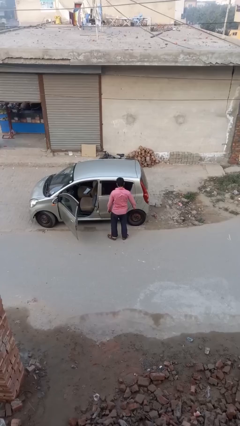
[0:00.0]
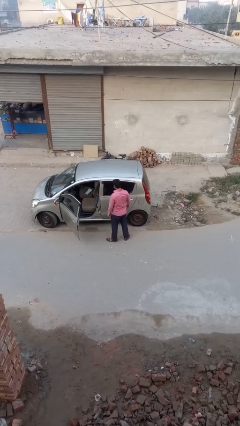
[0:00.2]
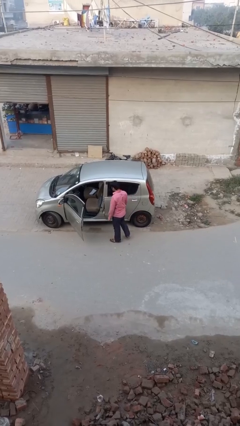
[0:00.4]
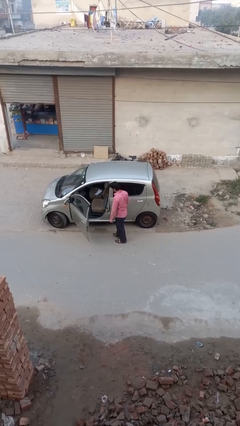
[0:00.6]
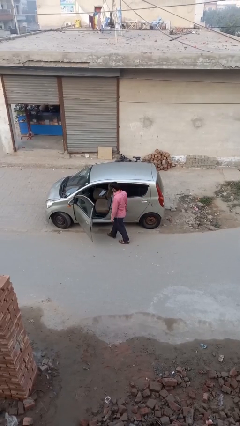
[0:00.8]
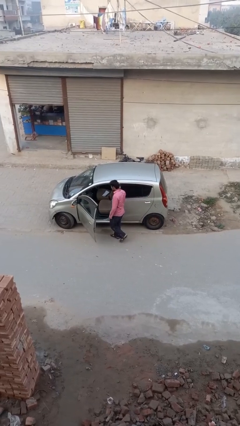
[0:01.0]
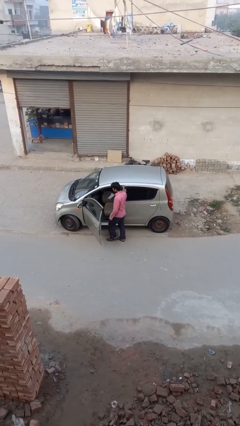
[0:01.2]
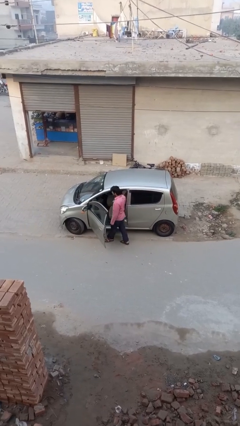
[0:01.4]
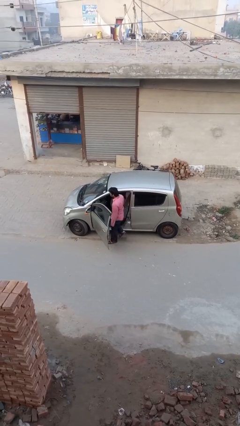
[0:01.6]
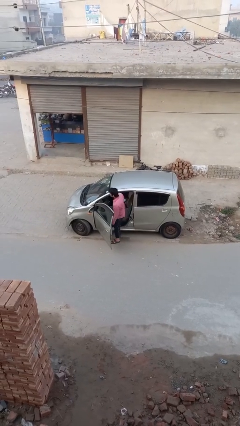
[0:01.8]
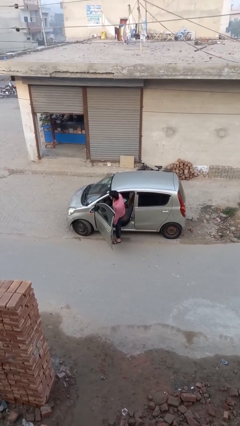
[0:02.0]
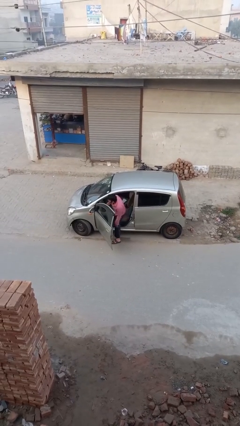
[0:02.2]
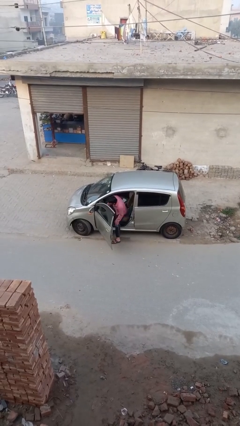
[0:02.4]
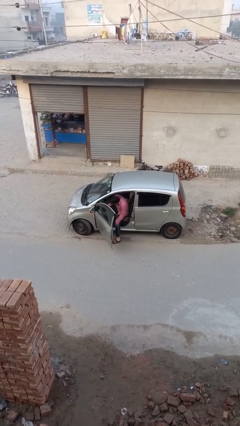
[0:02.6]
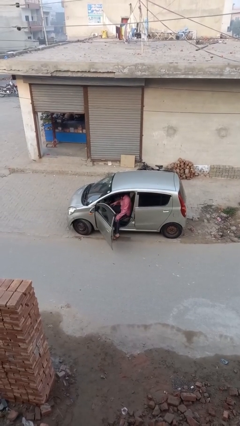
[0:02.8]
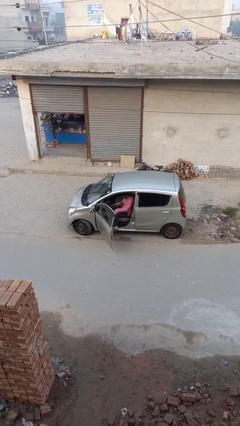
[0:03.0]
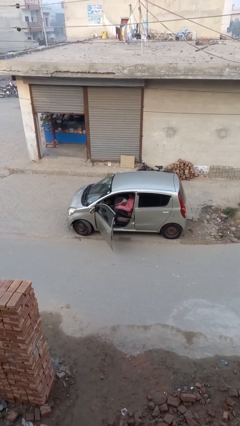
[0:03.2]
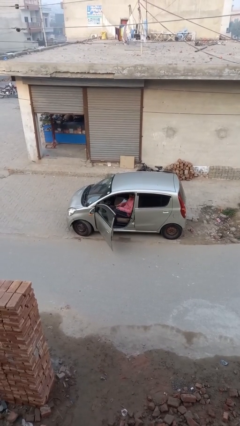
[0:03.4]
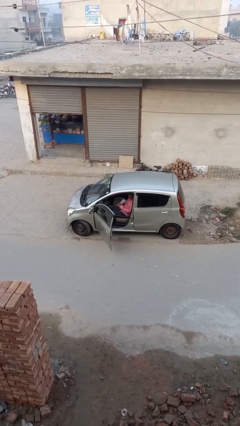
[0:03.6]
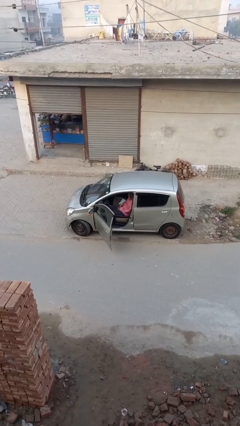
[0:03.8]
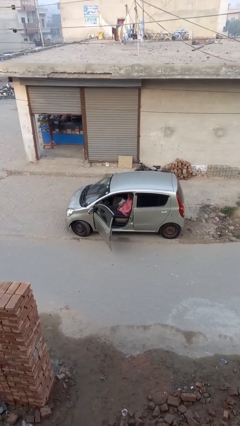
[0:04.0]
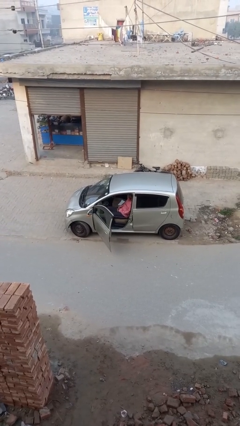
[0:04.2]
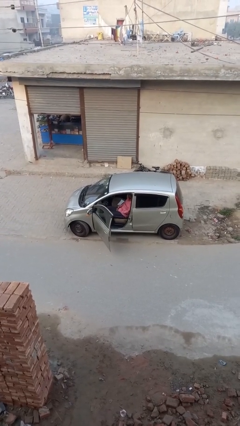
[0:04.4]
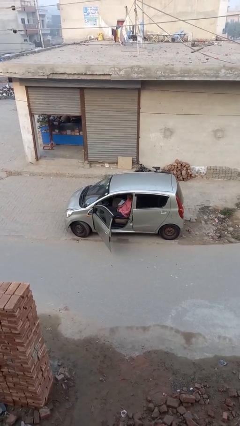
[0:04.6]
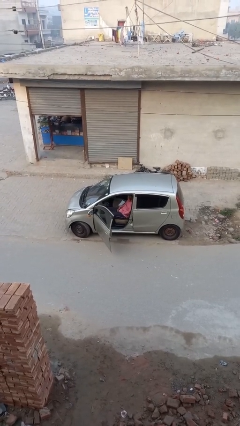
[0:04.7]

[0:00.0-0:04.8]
person enters car

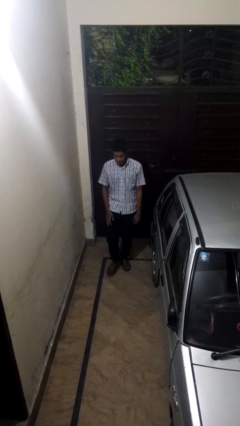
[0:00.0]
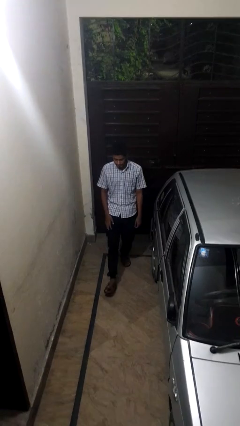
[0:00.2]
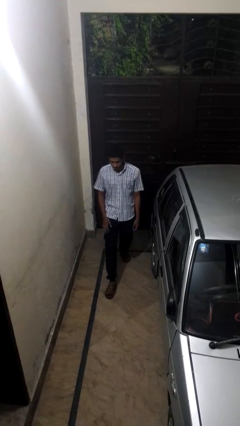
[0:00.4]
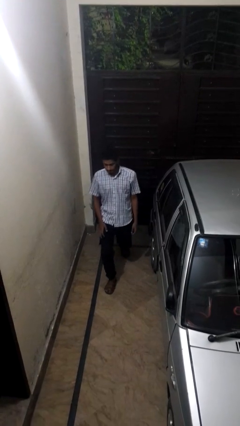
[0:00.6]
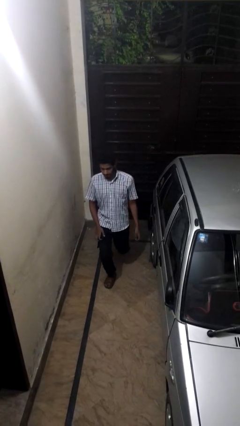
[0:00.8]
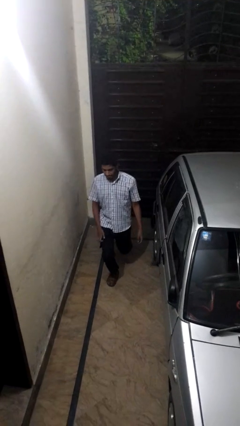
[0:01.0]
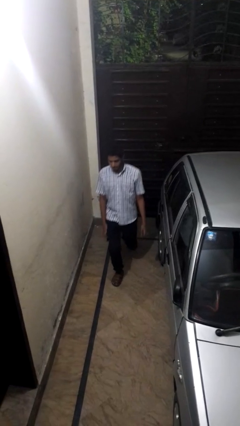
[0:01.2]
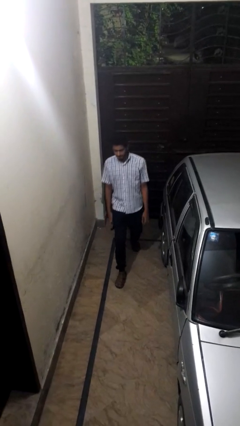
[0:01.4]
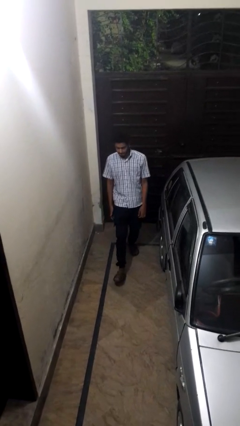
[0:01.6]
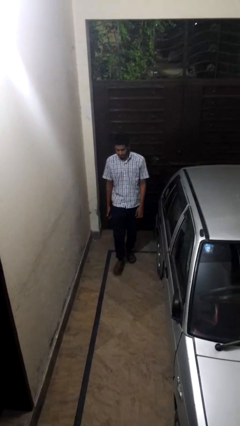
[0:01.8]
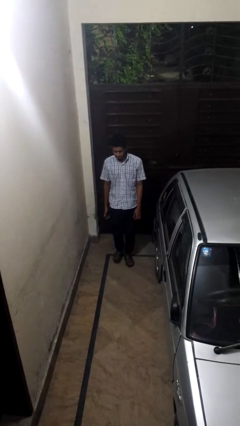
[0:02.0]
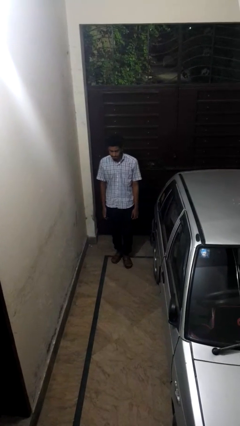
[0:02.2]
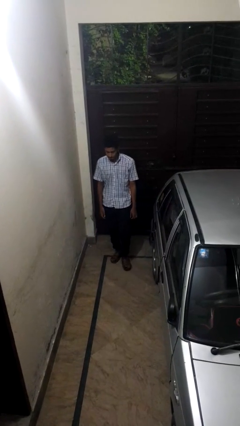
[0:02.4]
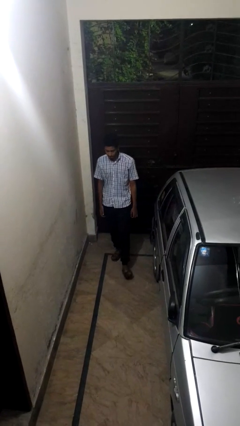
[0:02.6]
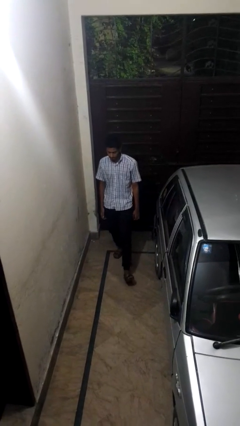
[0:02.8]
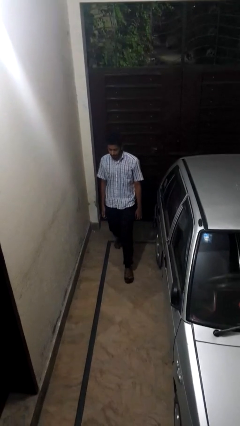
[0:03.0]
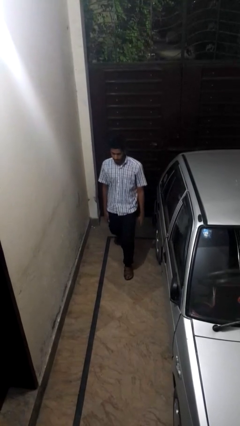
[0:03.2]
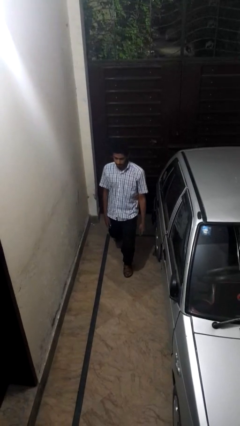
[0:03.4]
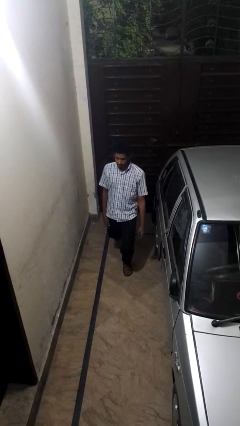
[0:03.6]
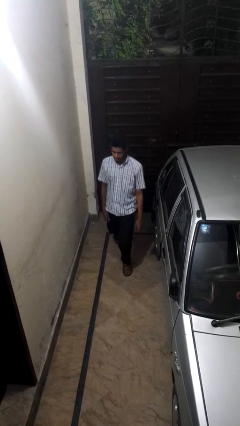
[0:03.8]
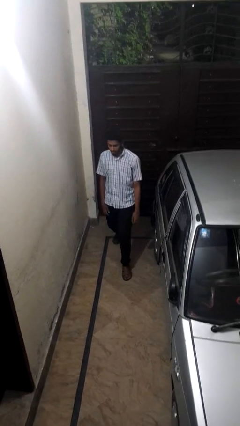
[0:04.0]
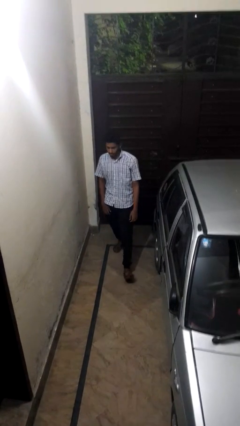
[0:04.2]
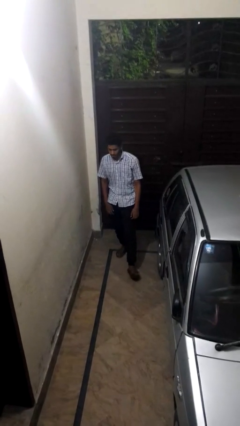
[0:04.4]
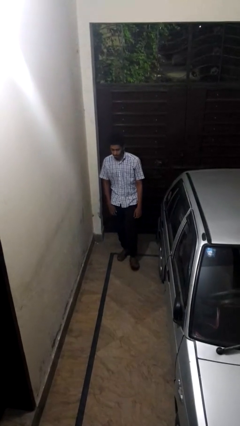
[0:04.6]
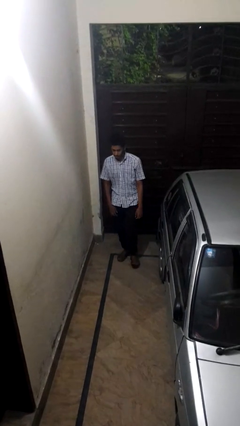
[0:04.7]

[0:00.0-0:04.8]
person exercises with lunges

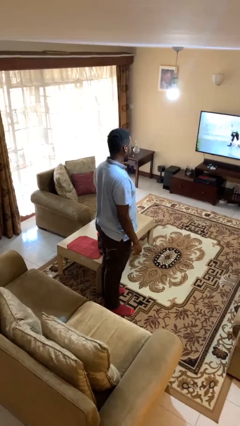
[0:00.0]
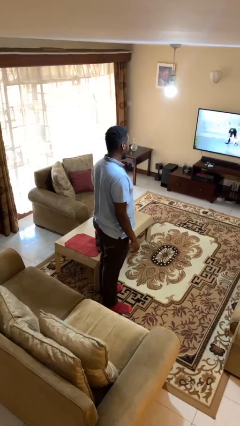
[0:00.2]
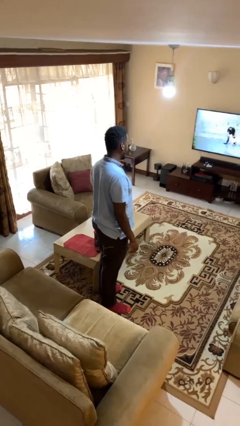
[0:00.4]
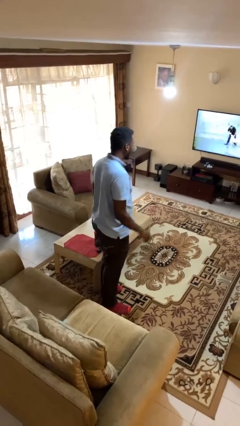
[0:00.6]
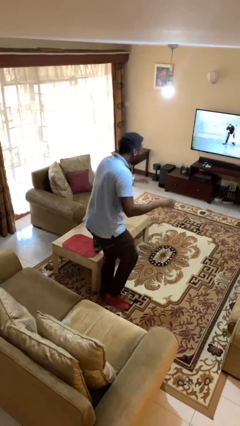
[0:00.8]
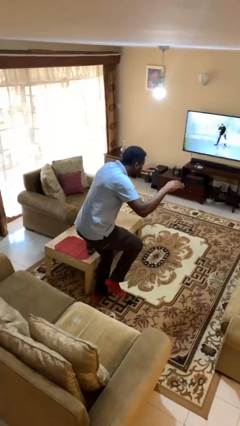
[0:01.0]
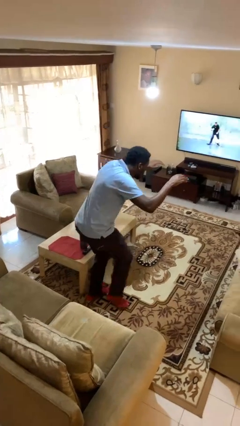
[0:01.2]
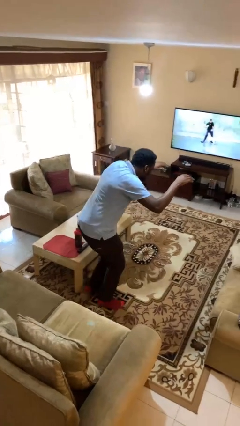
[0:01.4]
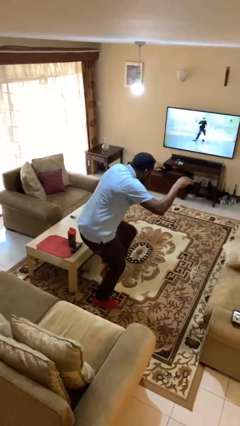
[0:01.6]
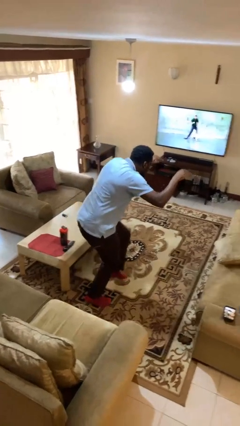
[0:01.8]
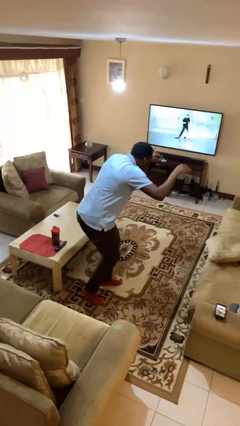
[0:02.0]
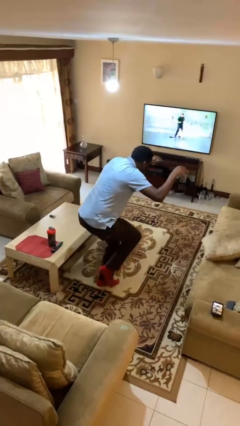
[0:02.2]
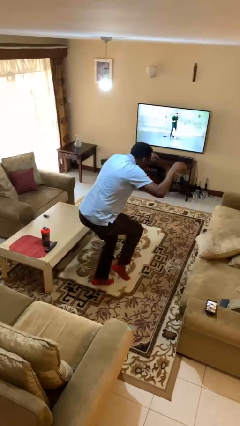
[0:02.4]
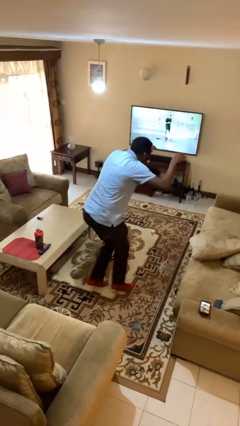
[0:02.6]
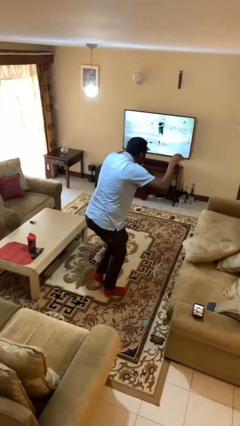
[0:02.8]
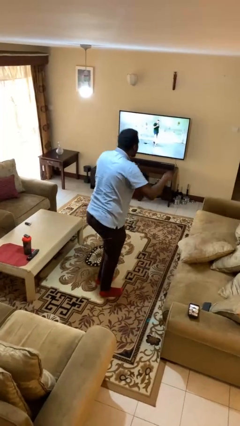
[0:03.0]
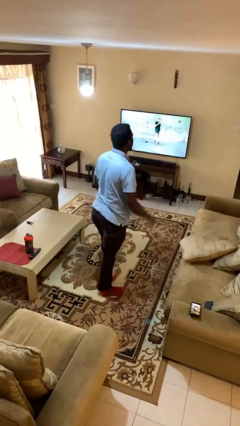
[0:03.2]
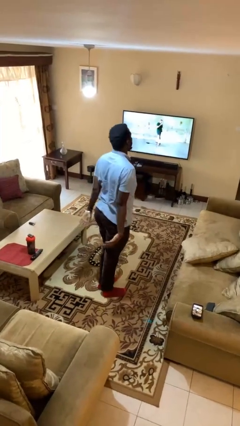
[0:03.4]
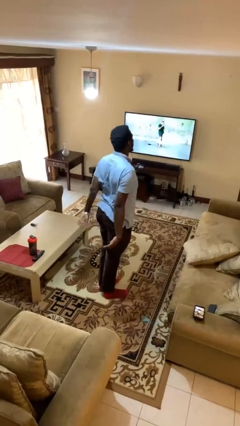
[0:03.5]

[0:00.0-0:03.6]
person walks tiptoe

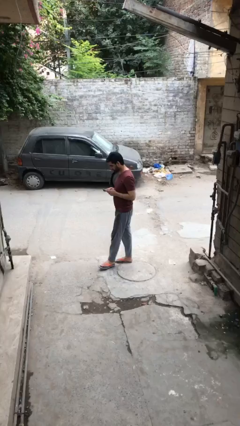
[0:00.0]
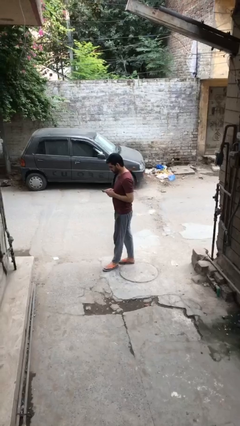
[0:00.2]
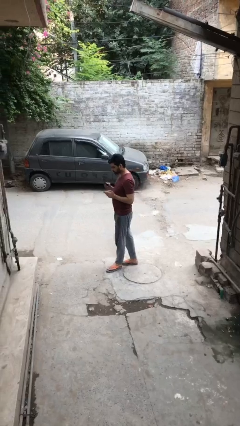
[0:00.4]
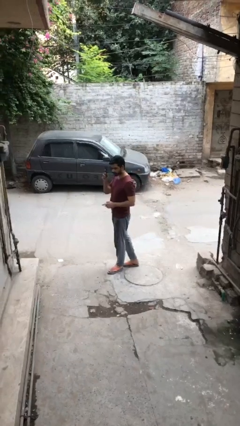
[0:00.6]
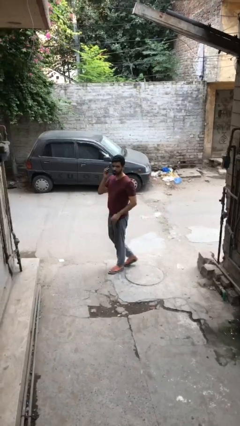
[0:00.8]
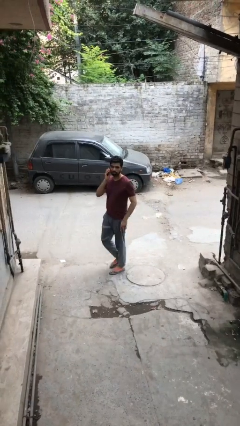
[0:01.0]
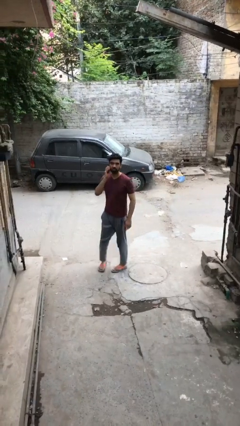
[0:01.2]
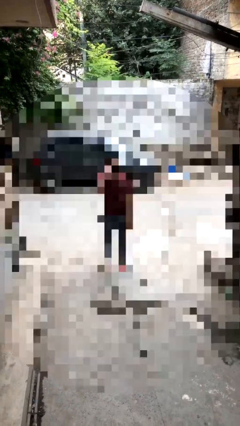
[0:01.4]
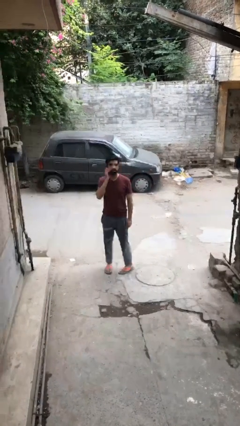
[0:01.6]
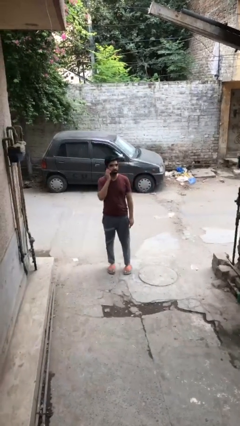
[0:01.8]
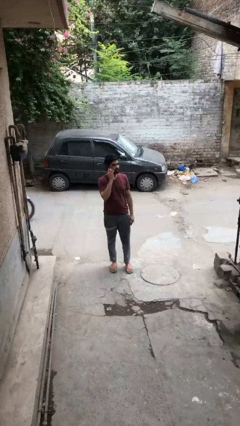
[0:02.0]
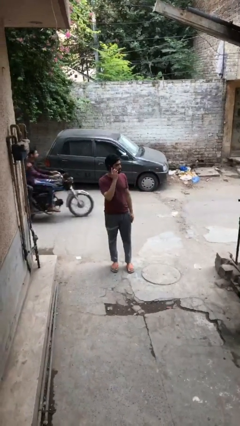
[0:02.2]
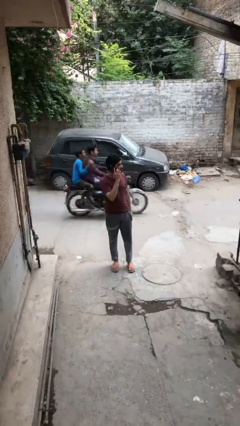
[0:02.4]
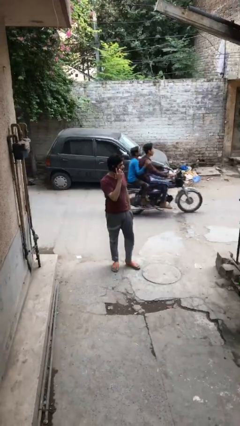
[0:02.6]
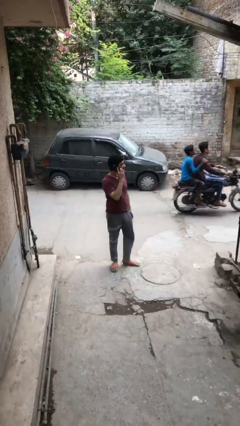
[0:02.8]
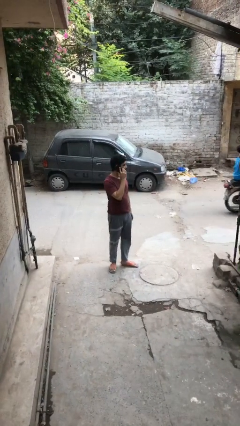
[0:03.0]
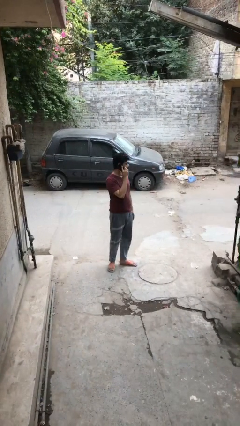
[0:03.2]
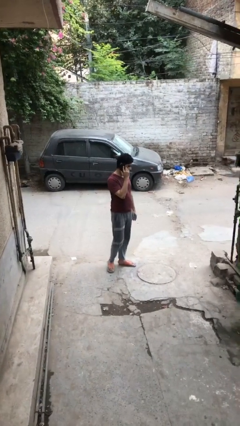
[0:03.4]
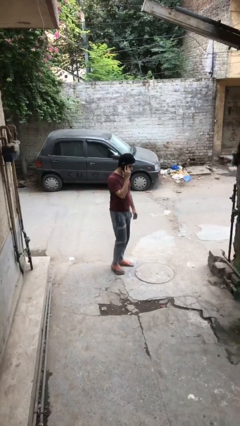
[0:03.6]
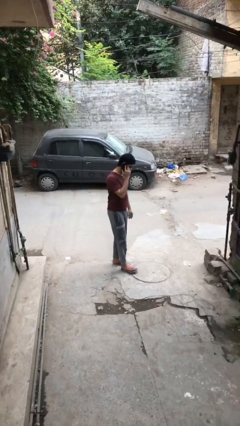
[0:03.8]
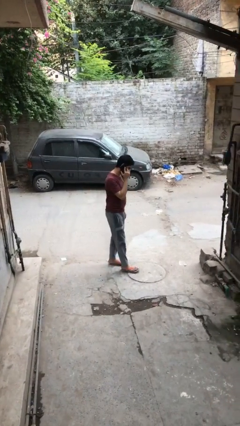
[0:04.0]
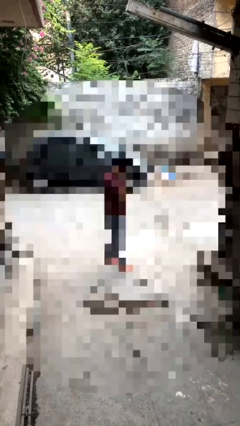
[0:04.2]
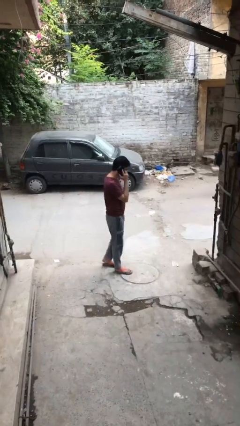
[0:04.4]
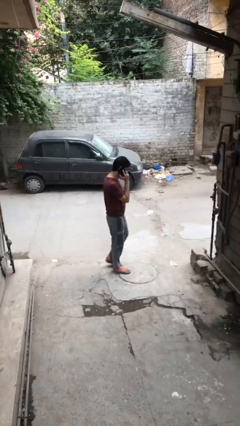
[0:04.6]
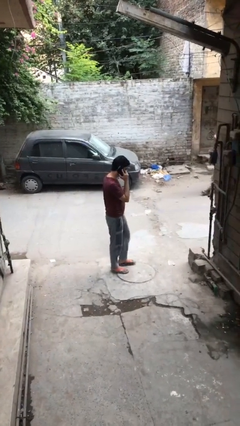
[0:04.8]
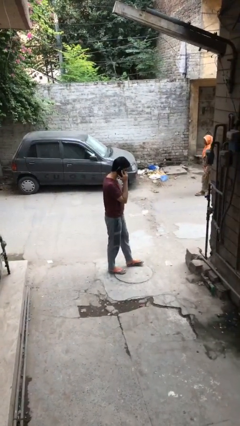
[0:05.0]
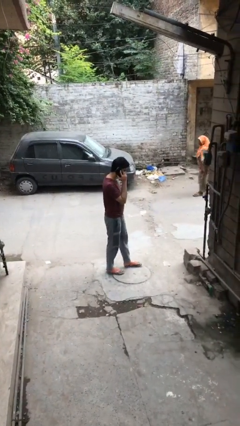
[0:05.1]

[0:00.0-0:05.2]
person talks on phone
